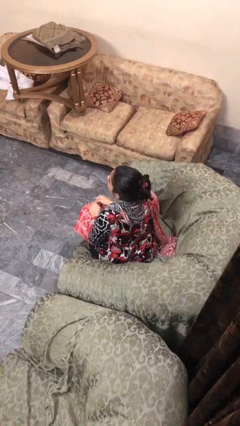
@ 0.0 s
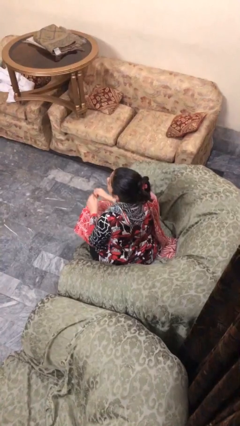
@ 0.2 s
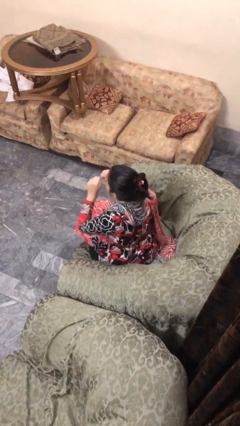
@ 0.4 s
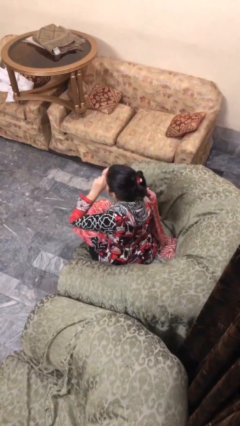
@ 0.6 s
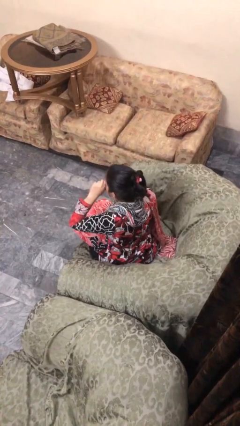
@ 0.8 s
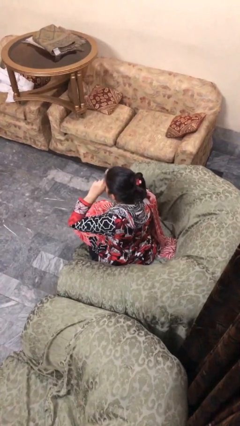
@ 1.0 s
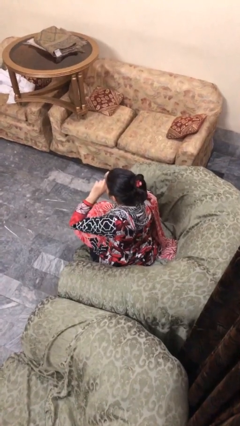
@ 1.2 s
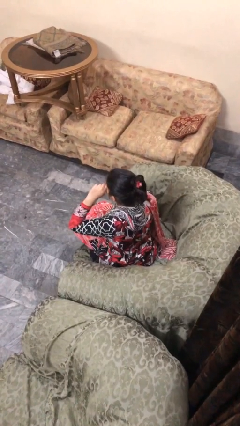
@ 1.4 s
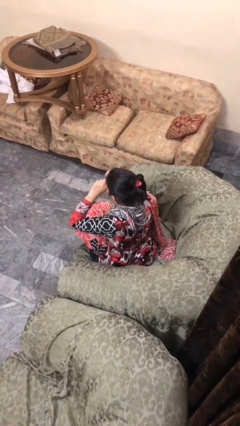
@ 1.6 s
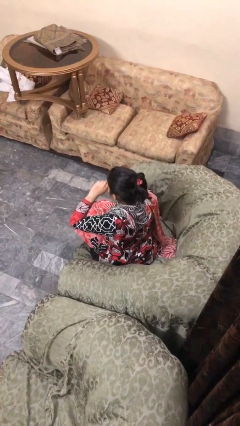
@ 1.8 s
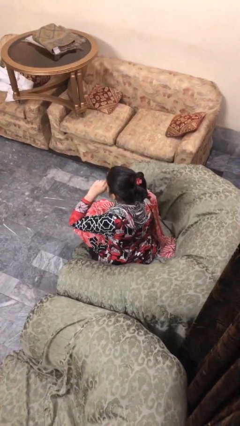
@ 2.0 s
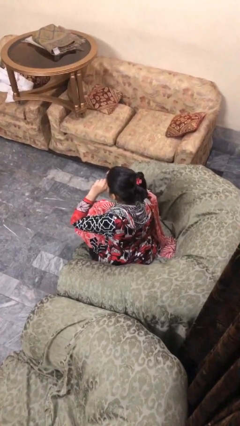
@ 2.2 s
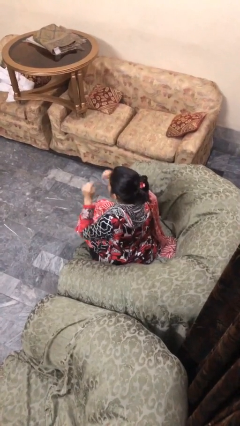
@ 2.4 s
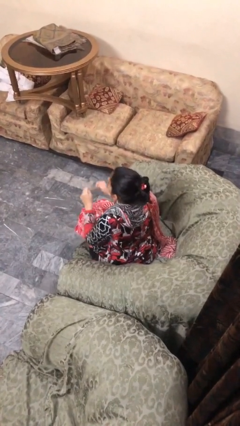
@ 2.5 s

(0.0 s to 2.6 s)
person rubs eyes

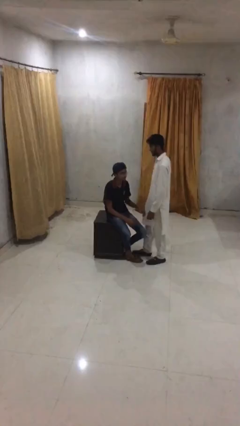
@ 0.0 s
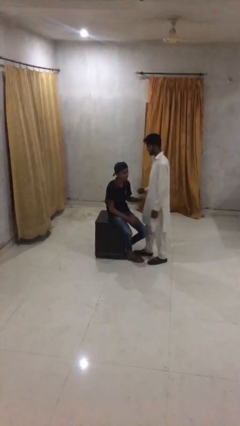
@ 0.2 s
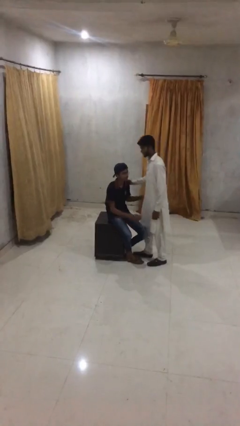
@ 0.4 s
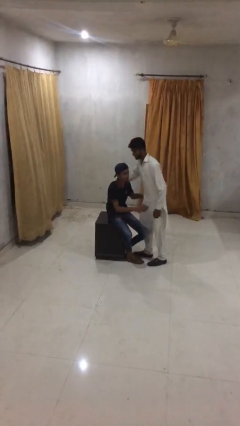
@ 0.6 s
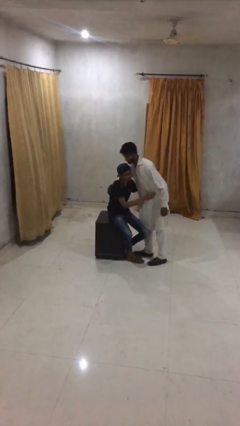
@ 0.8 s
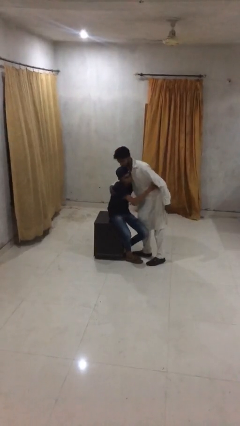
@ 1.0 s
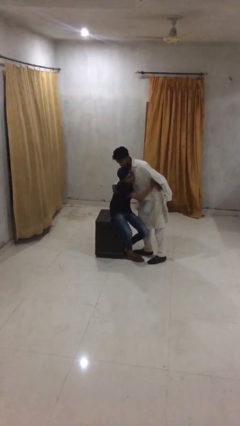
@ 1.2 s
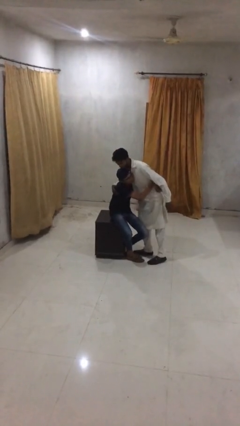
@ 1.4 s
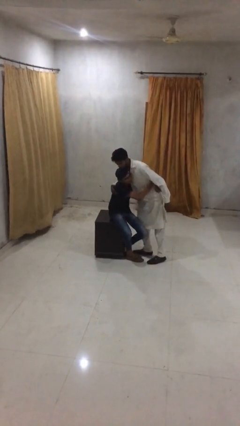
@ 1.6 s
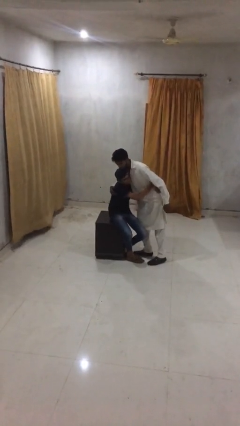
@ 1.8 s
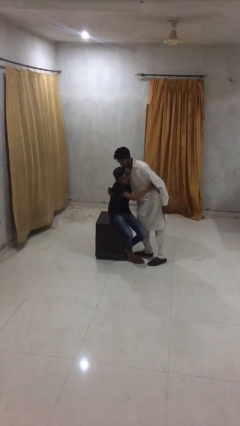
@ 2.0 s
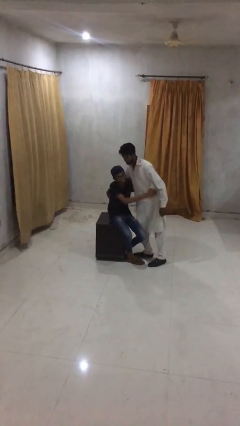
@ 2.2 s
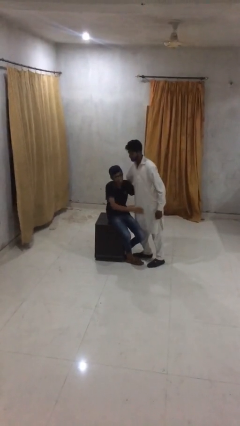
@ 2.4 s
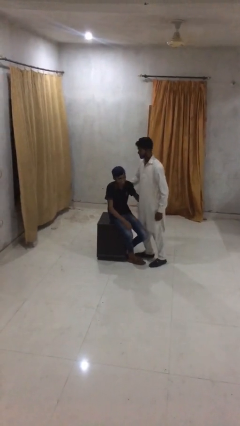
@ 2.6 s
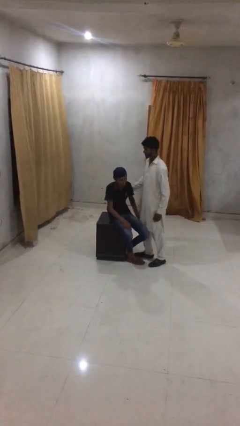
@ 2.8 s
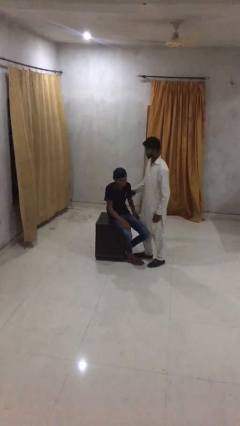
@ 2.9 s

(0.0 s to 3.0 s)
person embraces person

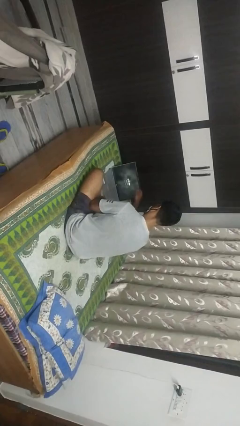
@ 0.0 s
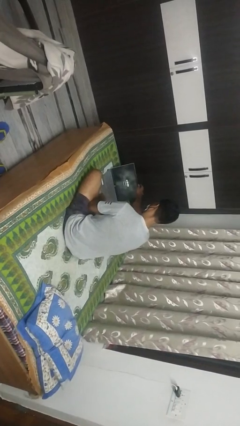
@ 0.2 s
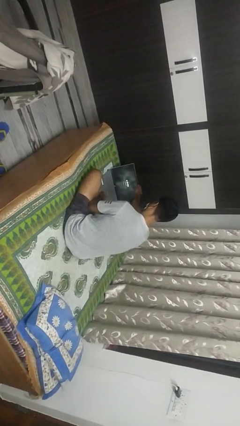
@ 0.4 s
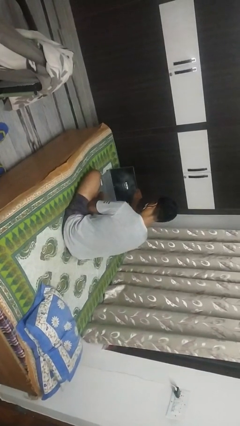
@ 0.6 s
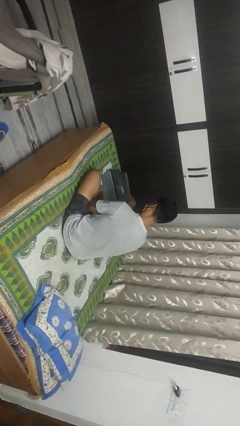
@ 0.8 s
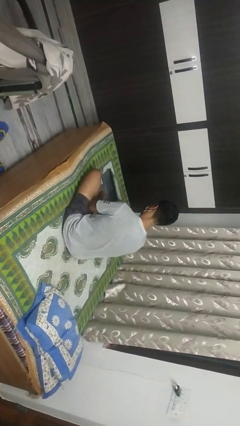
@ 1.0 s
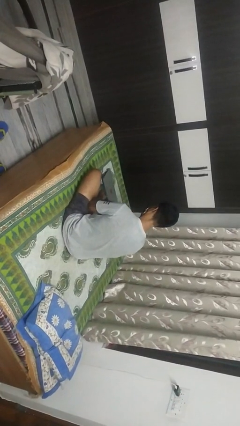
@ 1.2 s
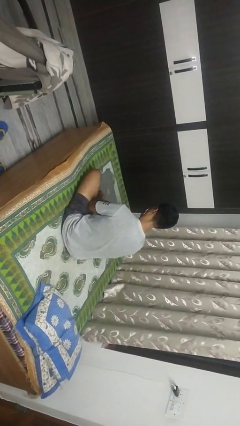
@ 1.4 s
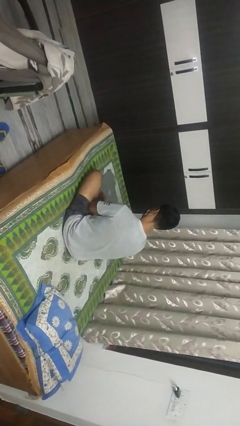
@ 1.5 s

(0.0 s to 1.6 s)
person closes laptop

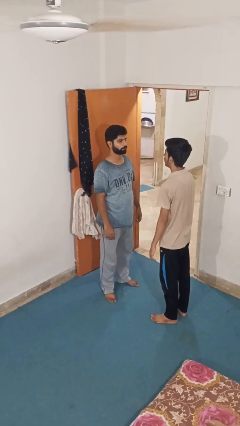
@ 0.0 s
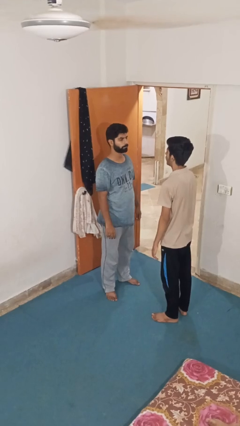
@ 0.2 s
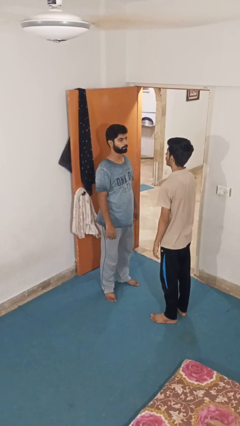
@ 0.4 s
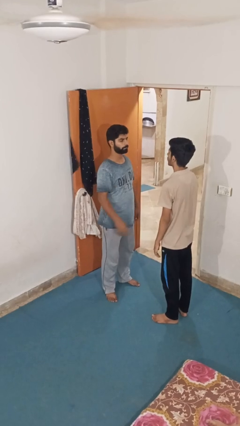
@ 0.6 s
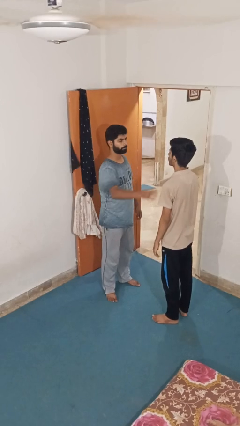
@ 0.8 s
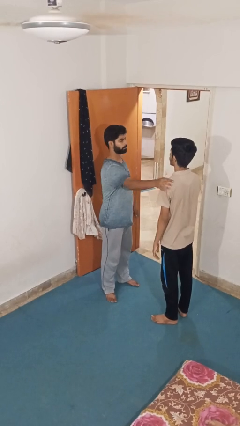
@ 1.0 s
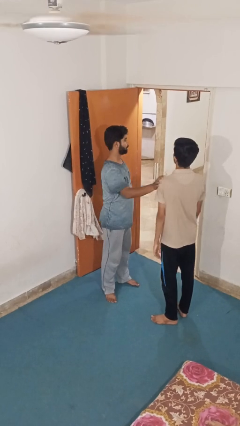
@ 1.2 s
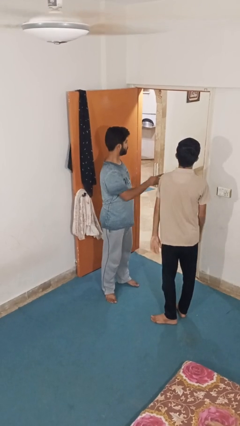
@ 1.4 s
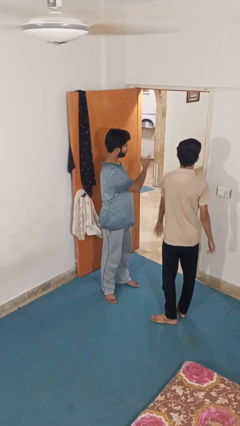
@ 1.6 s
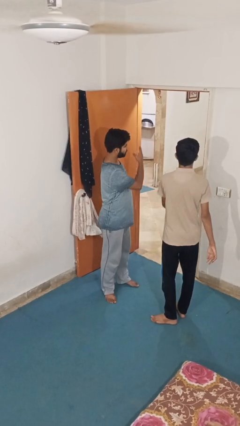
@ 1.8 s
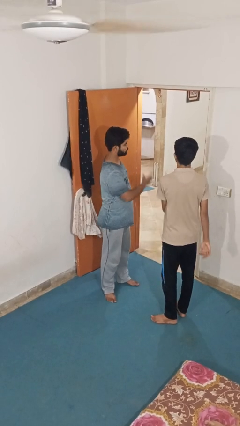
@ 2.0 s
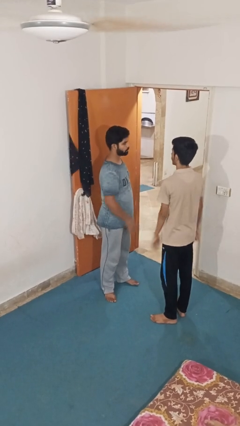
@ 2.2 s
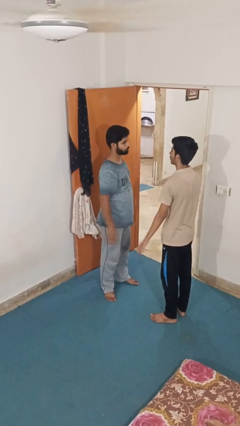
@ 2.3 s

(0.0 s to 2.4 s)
person shoves person

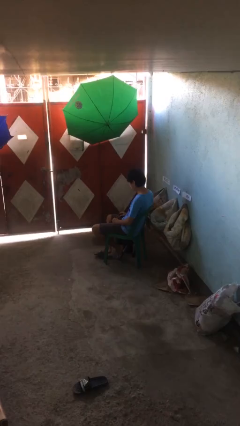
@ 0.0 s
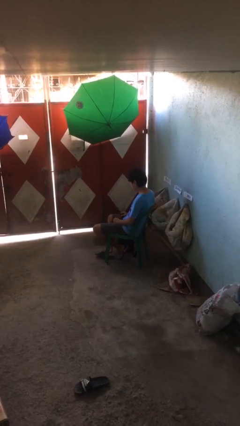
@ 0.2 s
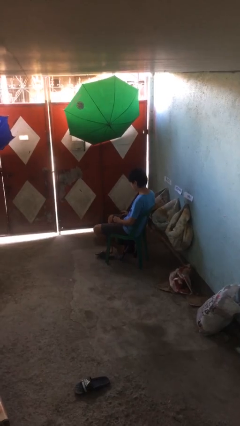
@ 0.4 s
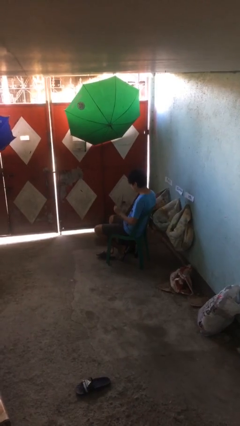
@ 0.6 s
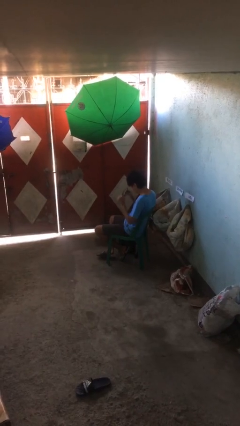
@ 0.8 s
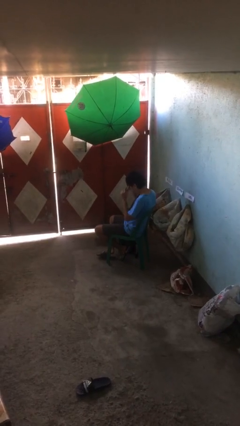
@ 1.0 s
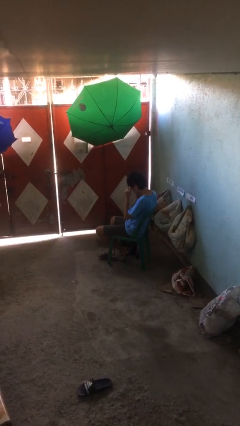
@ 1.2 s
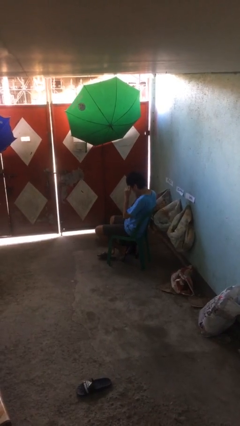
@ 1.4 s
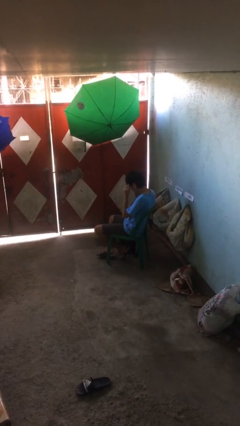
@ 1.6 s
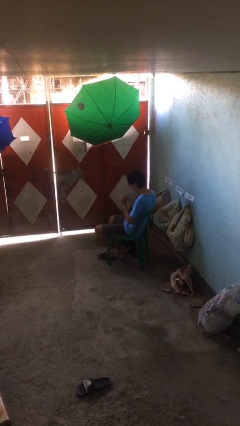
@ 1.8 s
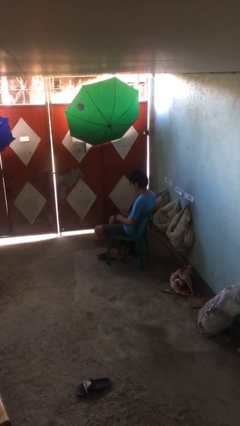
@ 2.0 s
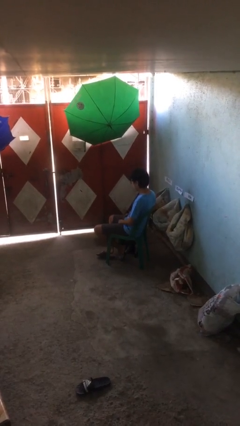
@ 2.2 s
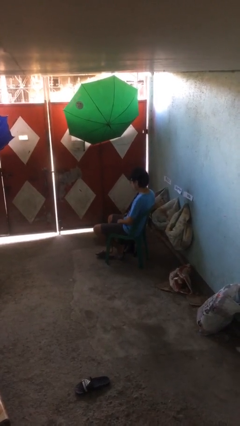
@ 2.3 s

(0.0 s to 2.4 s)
person puts on glasses

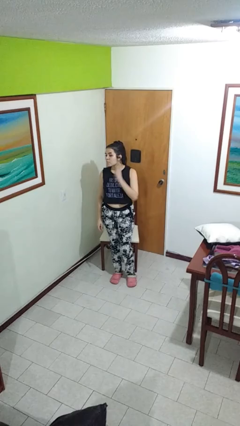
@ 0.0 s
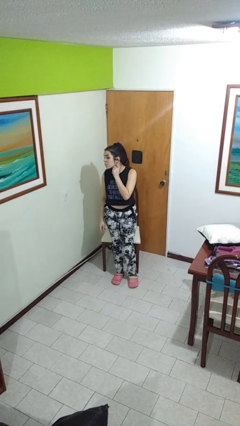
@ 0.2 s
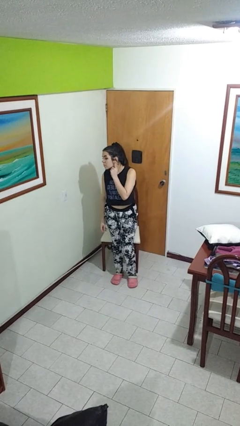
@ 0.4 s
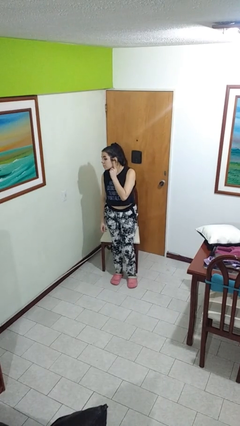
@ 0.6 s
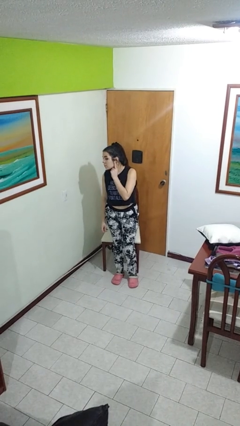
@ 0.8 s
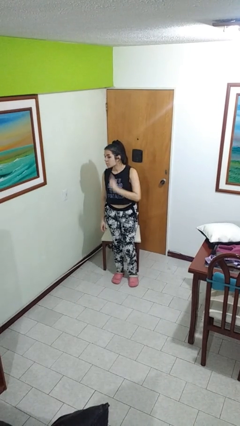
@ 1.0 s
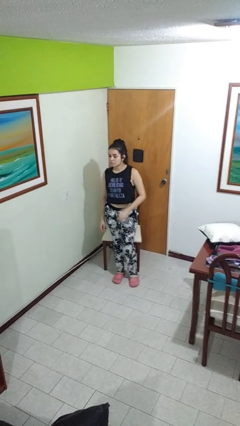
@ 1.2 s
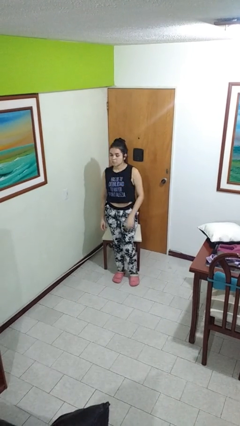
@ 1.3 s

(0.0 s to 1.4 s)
person gestures listen closely

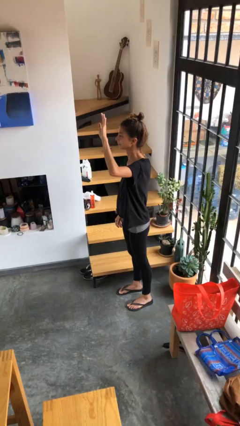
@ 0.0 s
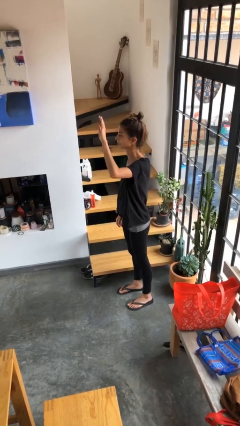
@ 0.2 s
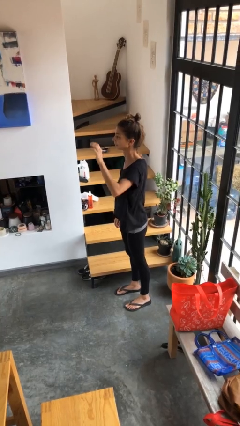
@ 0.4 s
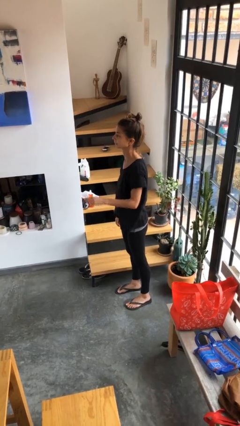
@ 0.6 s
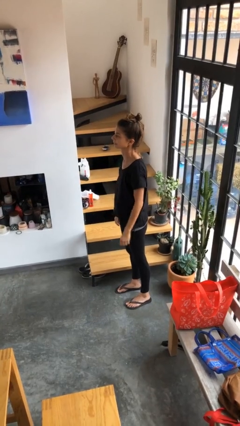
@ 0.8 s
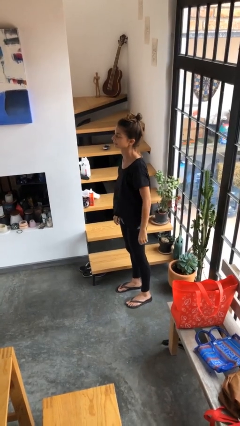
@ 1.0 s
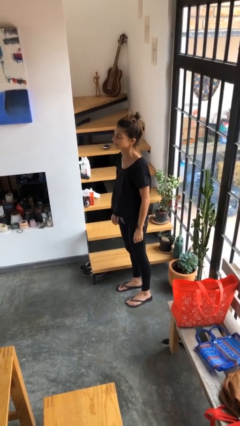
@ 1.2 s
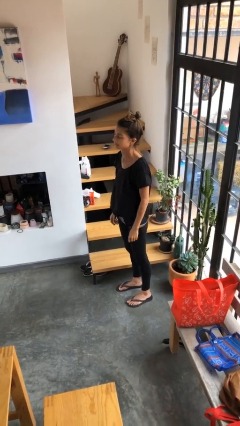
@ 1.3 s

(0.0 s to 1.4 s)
person gestures lower hand

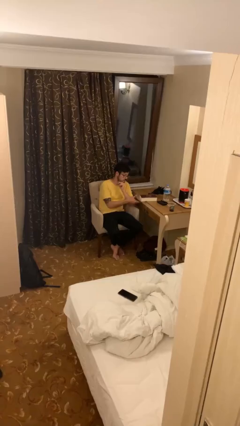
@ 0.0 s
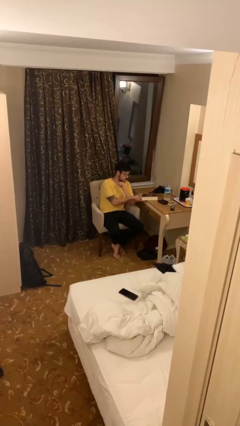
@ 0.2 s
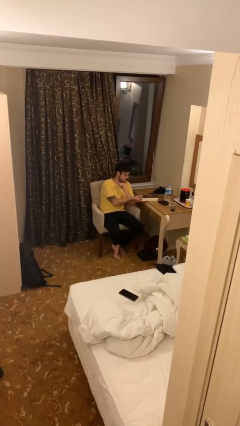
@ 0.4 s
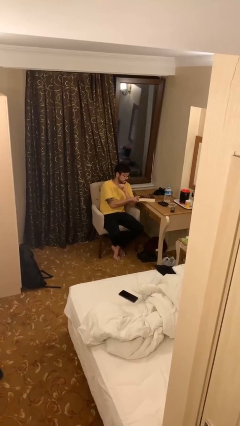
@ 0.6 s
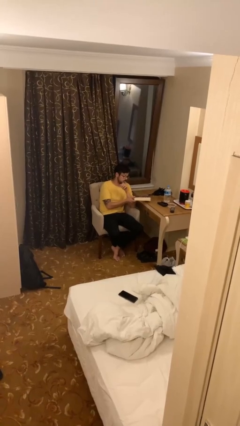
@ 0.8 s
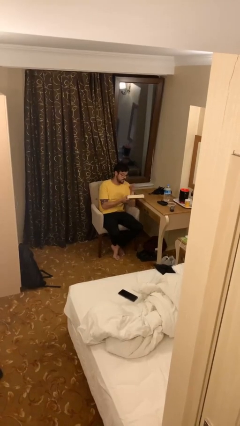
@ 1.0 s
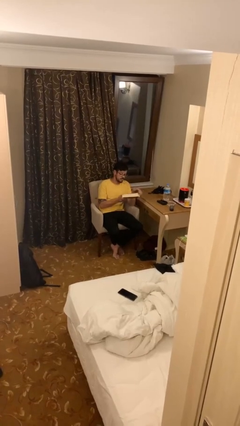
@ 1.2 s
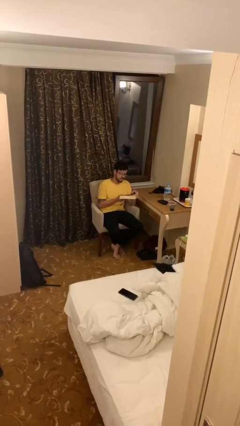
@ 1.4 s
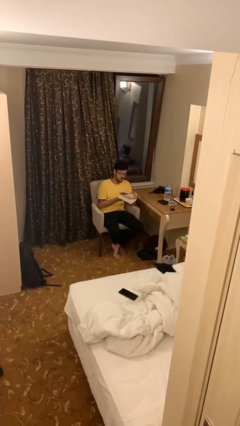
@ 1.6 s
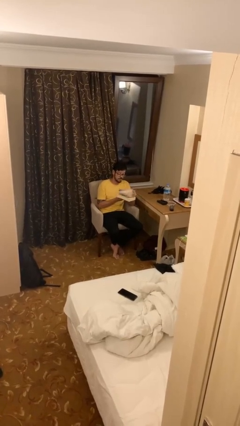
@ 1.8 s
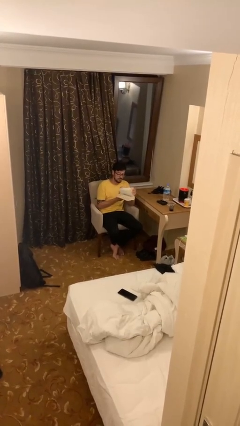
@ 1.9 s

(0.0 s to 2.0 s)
person picks up object from table

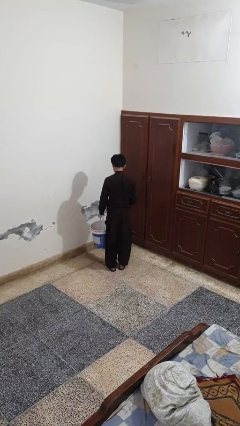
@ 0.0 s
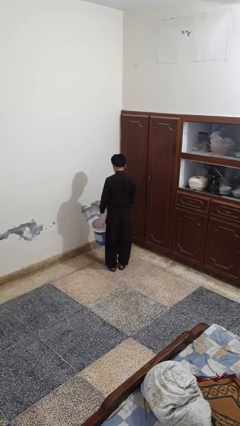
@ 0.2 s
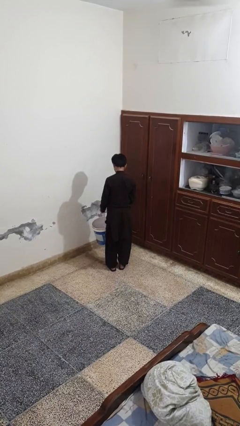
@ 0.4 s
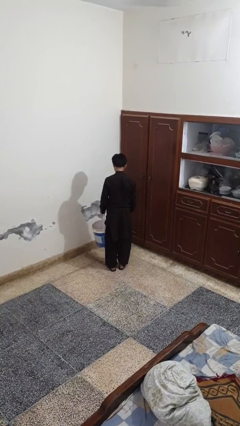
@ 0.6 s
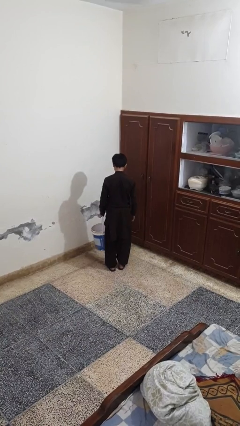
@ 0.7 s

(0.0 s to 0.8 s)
person puts object into basket
